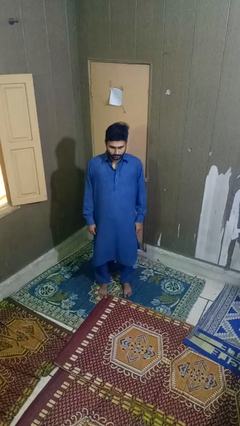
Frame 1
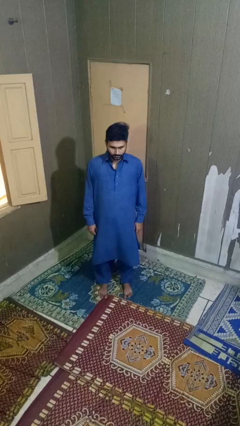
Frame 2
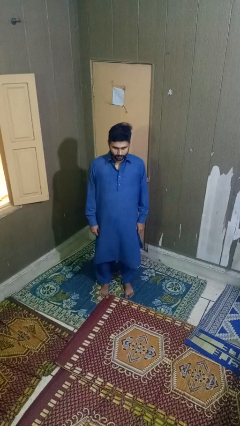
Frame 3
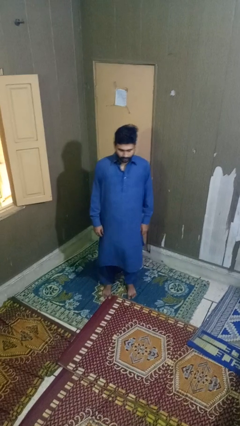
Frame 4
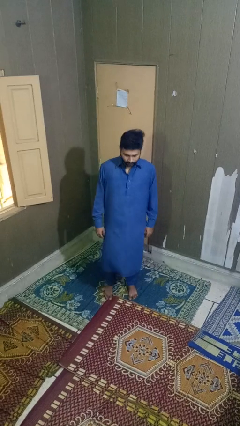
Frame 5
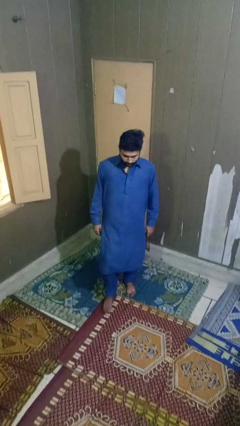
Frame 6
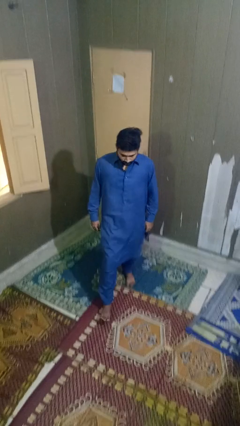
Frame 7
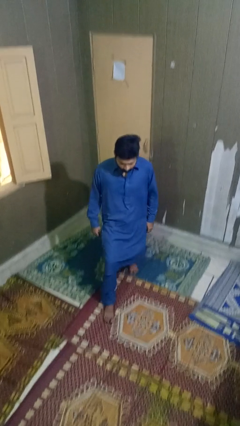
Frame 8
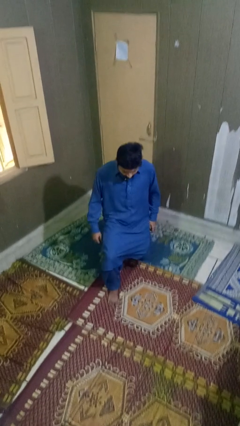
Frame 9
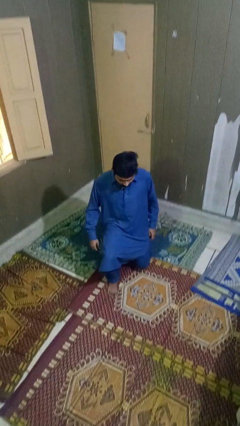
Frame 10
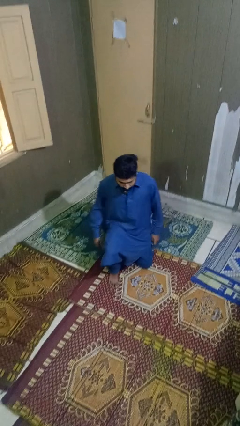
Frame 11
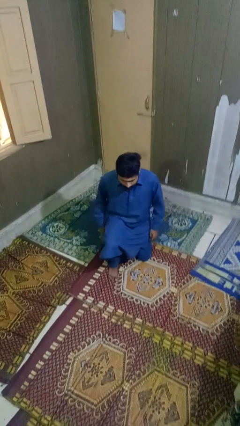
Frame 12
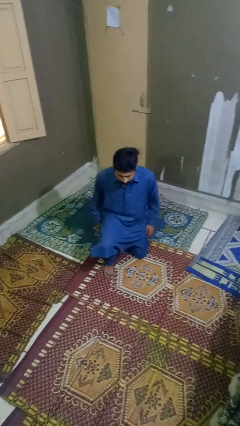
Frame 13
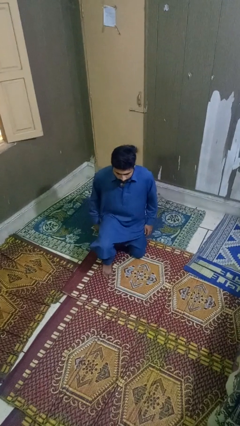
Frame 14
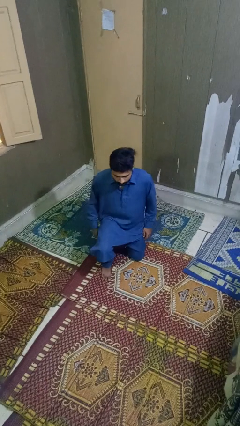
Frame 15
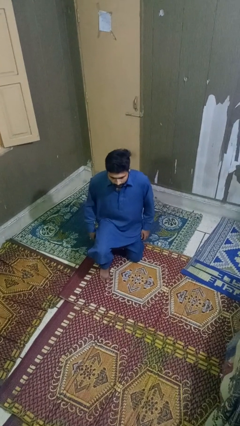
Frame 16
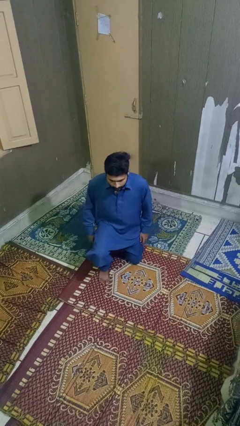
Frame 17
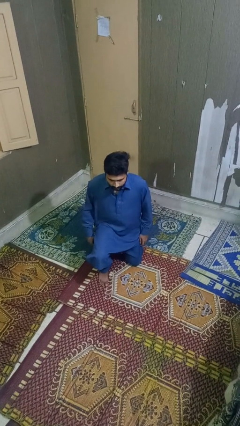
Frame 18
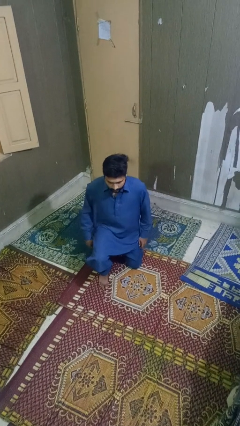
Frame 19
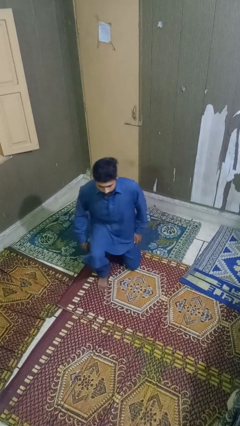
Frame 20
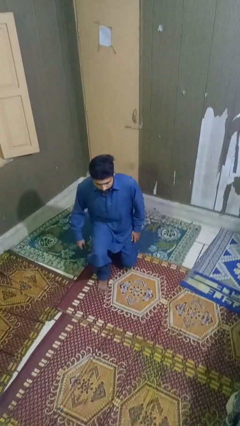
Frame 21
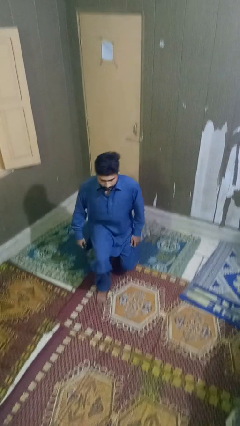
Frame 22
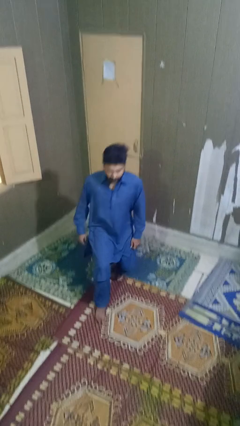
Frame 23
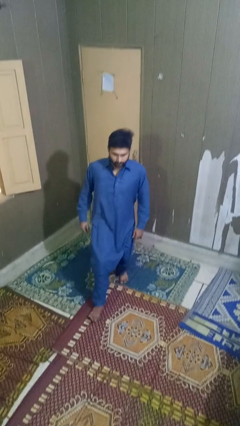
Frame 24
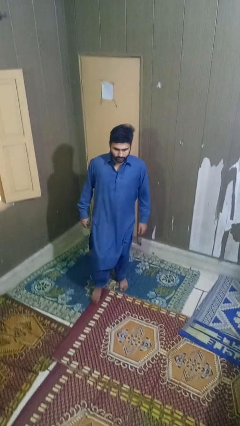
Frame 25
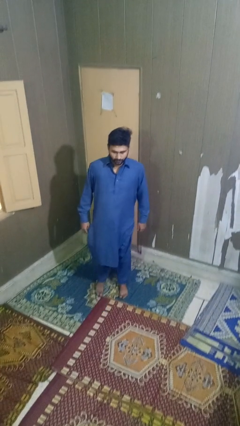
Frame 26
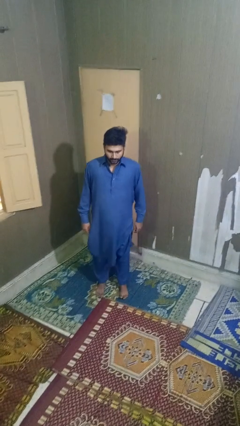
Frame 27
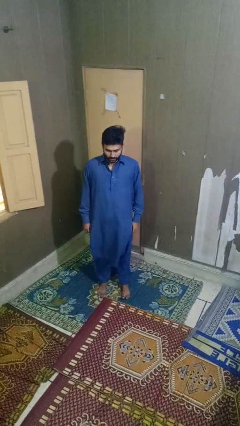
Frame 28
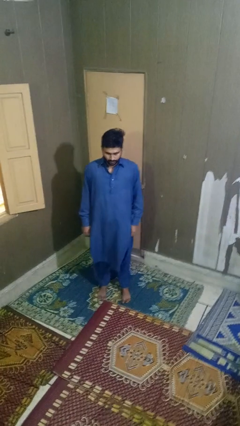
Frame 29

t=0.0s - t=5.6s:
person exercises with lunges

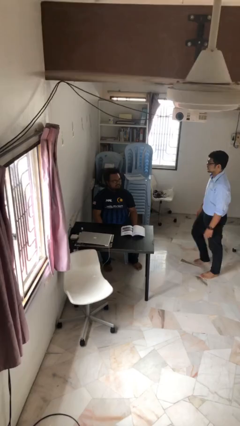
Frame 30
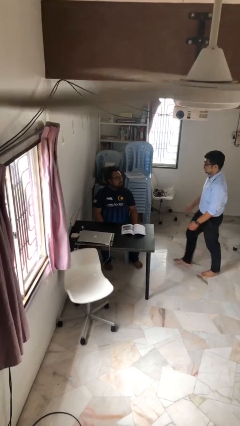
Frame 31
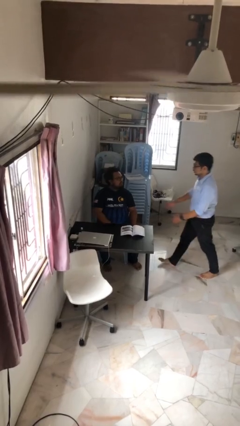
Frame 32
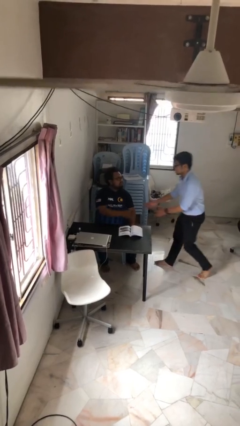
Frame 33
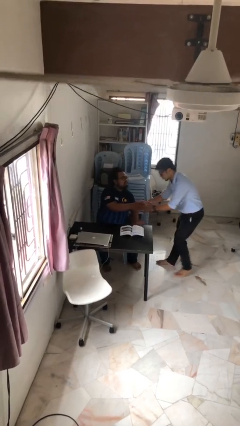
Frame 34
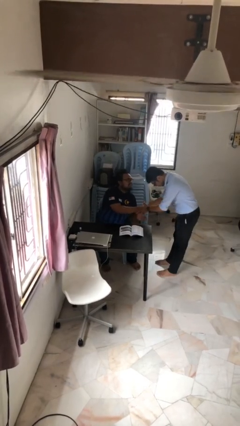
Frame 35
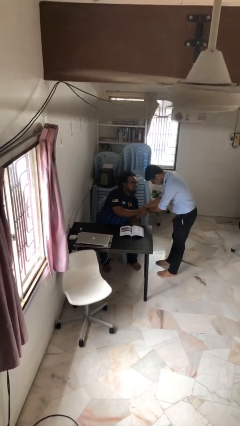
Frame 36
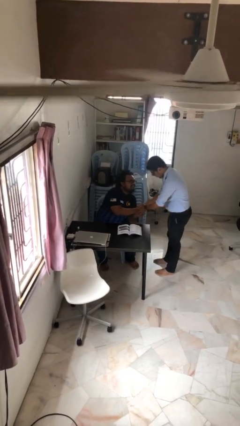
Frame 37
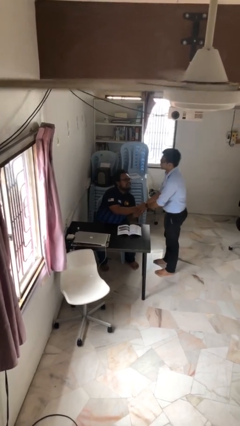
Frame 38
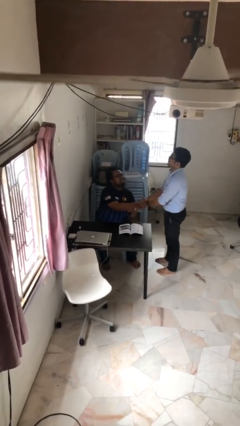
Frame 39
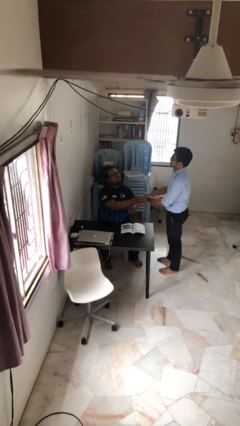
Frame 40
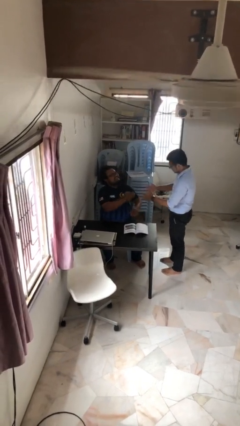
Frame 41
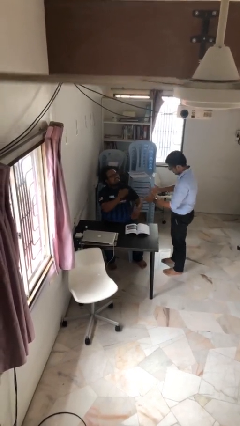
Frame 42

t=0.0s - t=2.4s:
person shakes hand

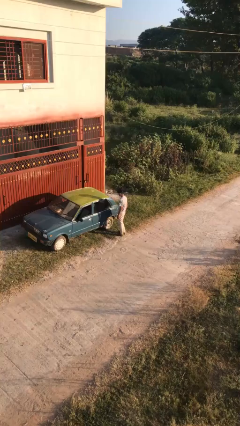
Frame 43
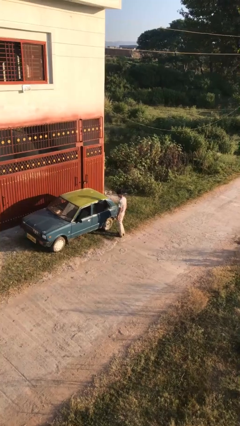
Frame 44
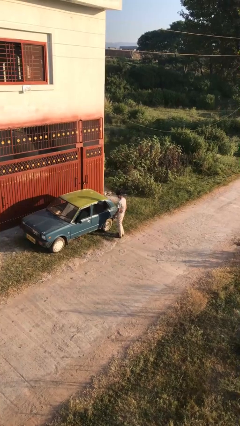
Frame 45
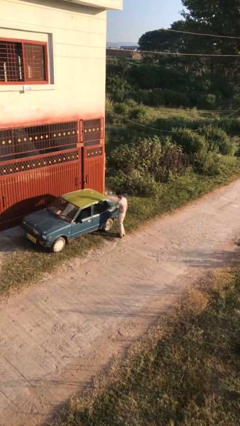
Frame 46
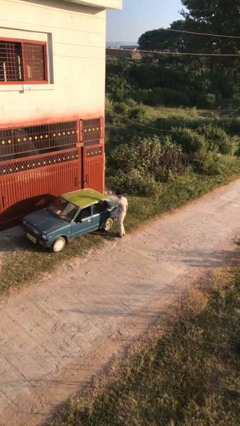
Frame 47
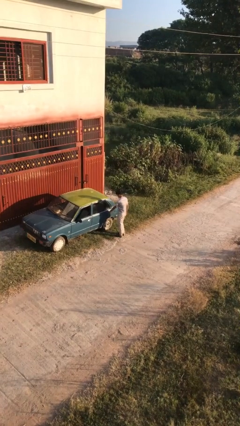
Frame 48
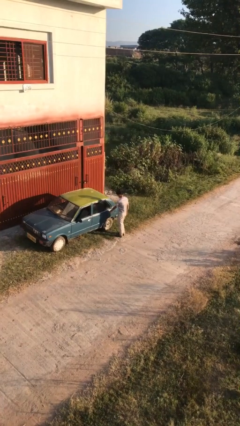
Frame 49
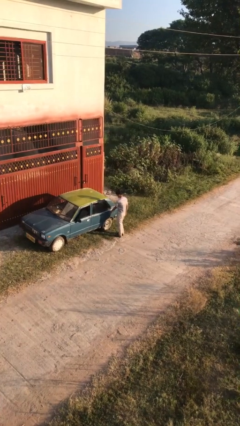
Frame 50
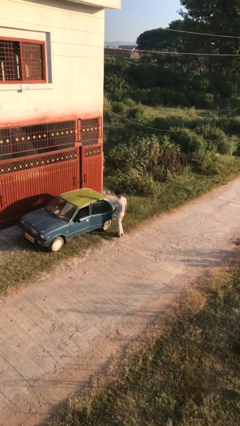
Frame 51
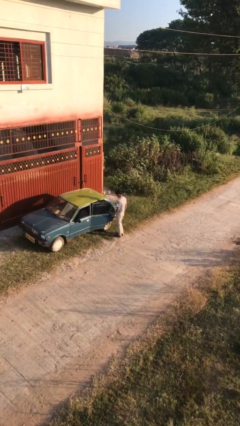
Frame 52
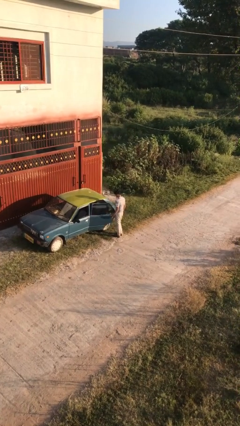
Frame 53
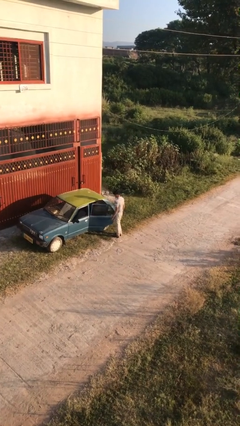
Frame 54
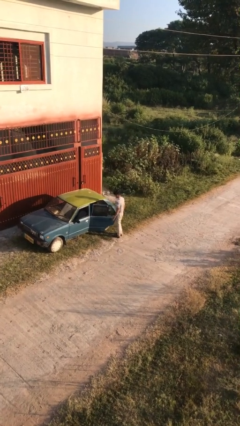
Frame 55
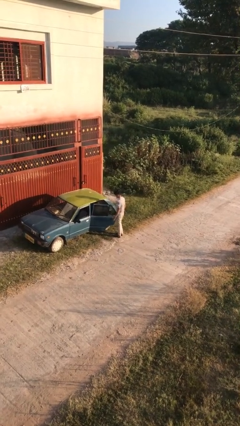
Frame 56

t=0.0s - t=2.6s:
person opens car door

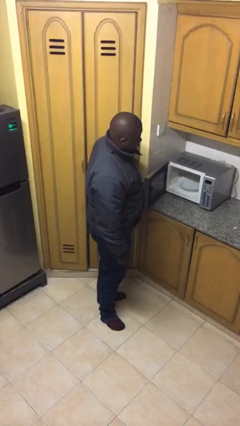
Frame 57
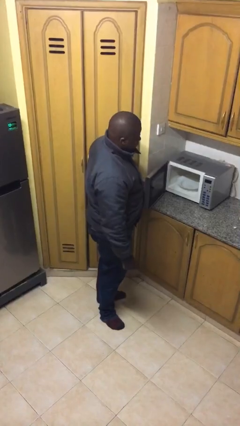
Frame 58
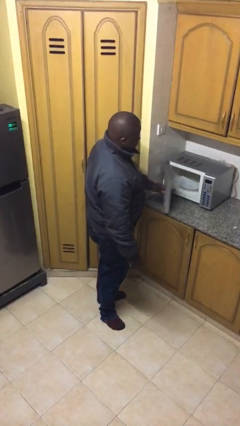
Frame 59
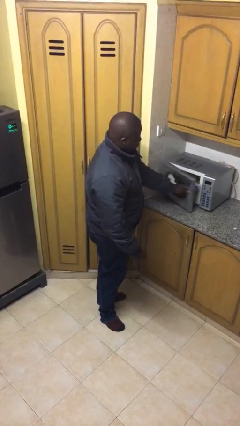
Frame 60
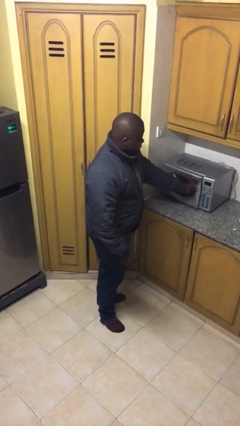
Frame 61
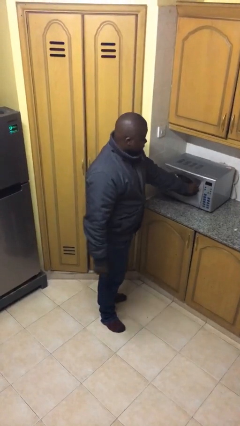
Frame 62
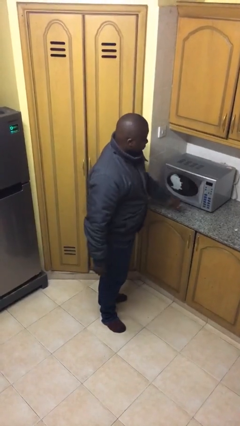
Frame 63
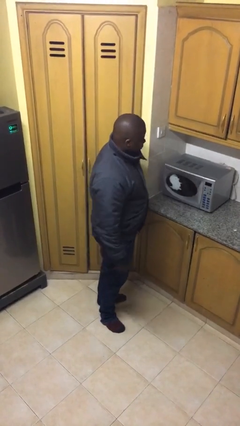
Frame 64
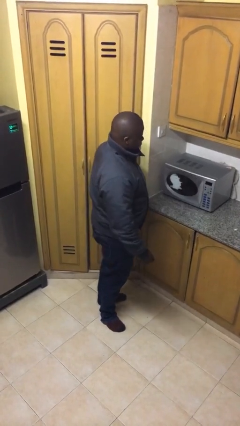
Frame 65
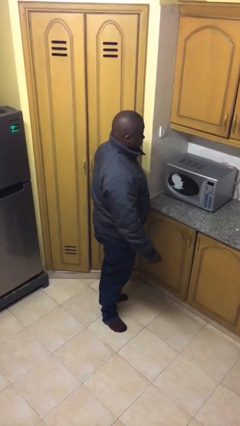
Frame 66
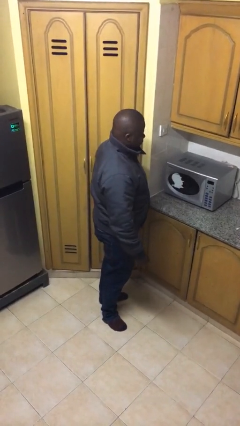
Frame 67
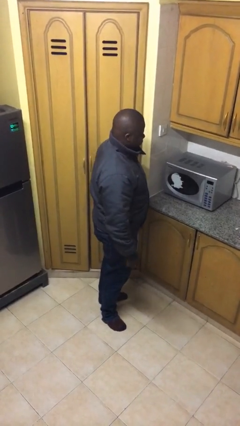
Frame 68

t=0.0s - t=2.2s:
person closes microwave

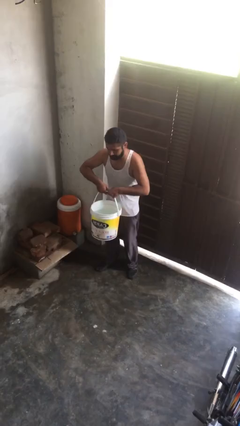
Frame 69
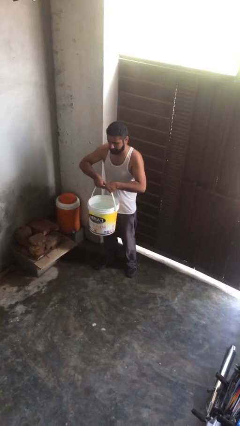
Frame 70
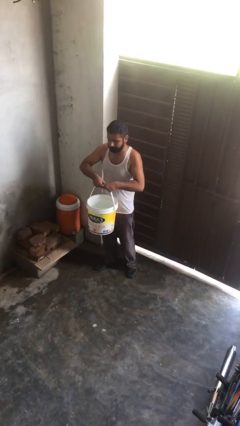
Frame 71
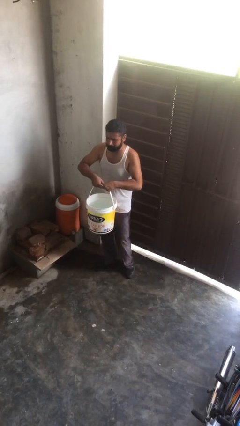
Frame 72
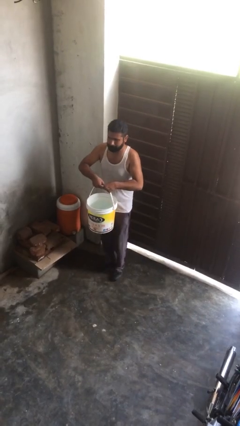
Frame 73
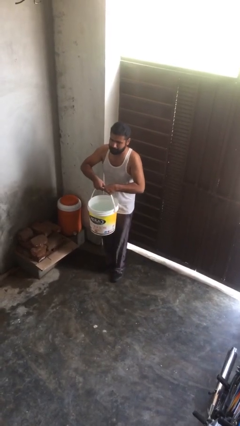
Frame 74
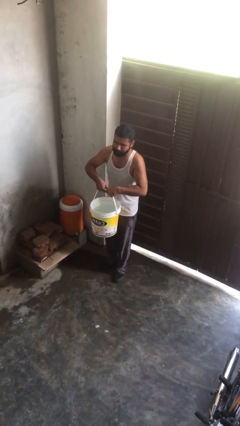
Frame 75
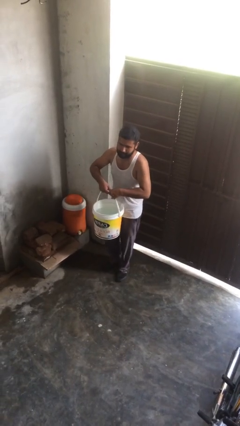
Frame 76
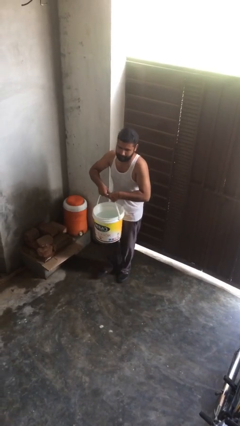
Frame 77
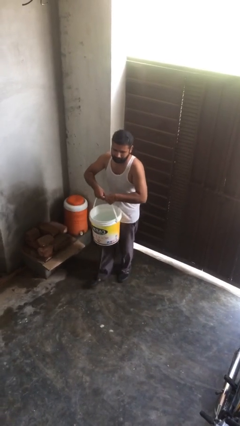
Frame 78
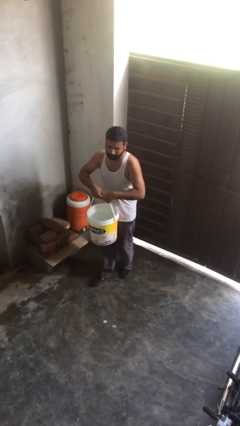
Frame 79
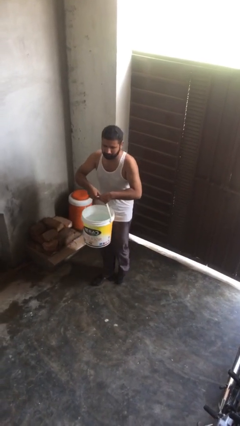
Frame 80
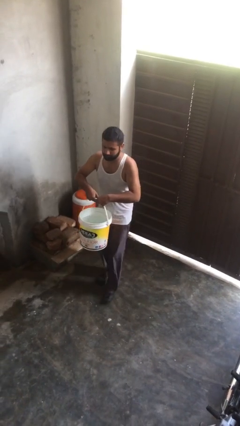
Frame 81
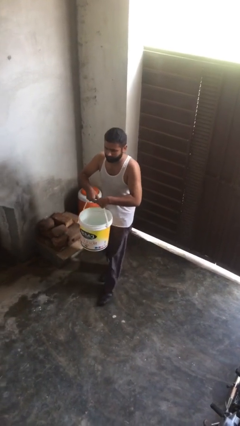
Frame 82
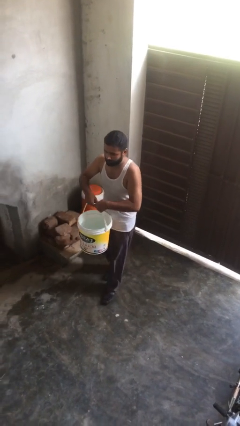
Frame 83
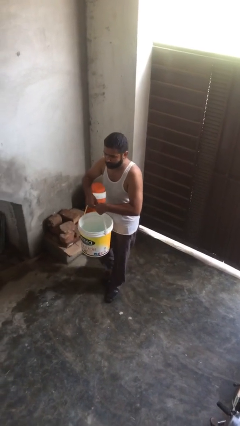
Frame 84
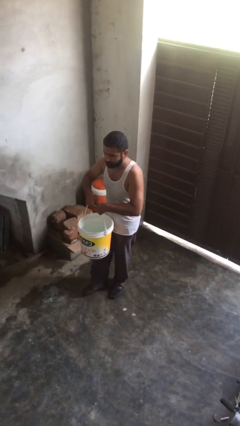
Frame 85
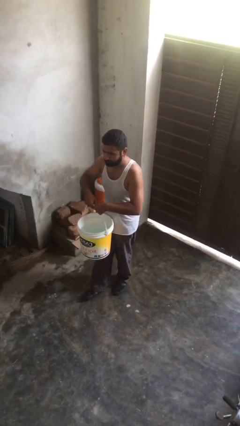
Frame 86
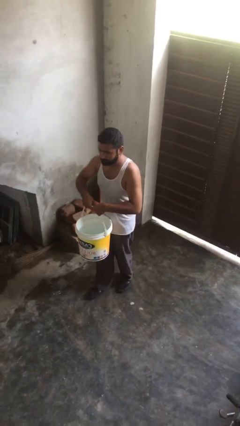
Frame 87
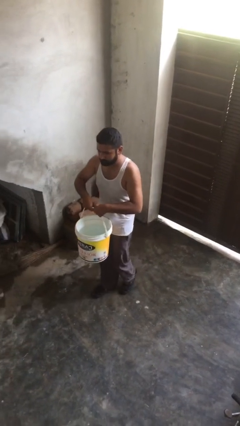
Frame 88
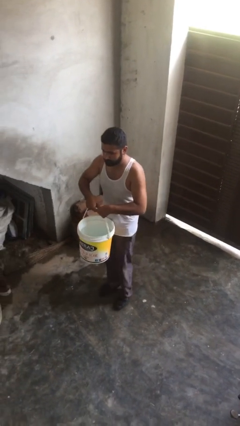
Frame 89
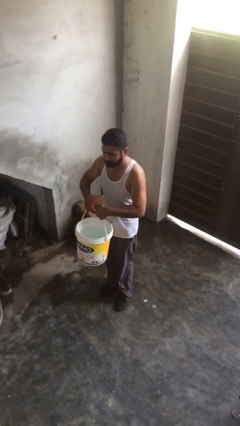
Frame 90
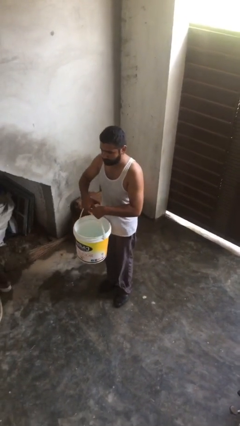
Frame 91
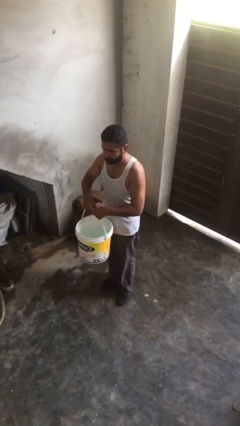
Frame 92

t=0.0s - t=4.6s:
person carries heavy object

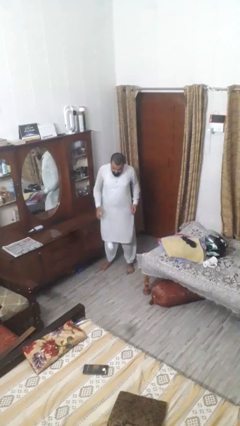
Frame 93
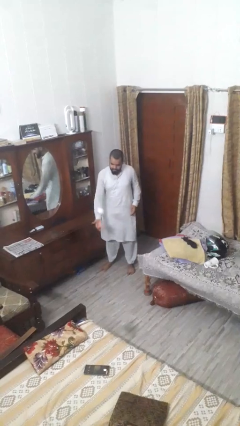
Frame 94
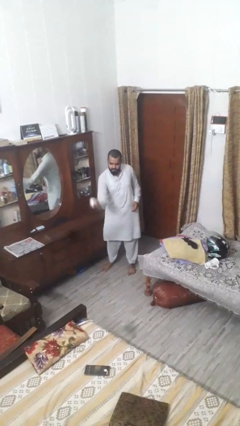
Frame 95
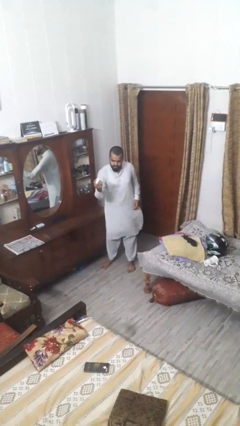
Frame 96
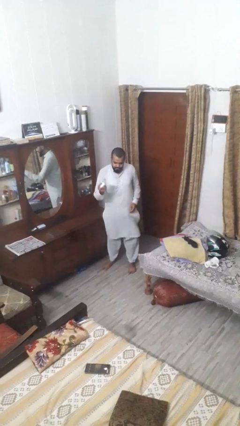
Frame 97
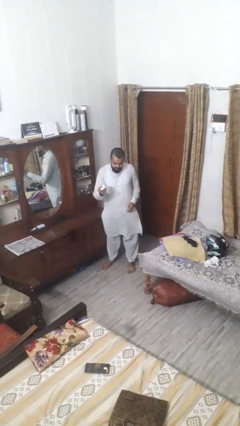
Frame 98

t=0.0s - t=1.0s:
person bounces ball on floor
